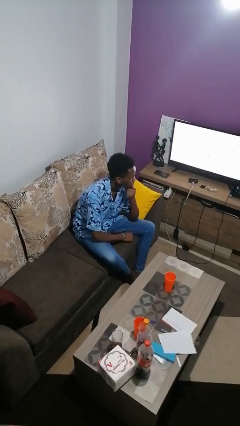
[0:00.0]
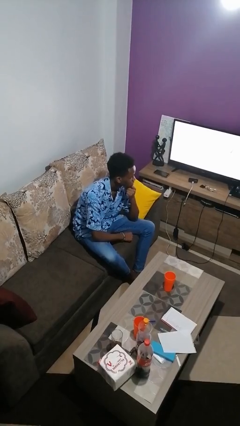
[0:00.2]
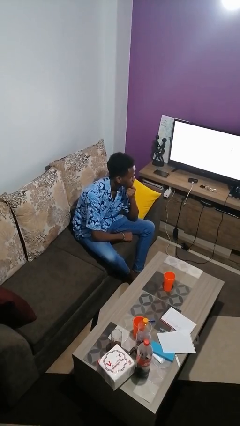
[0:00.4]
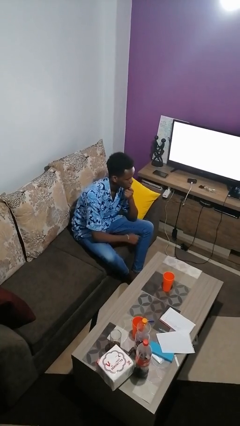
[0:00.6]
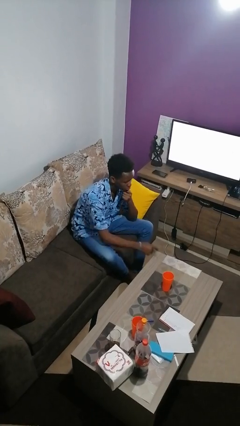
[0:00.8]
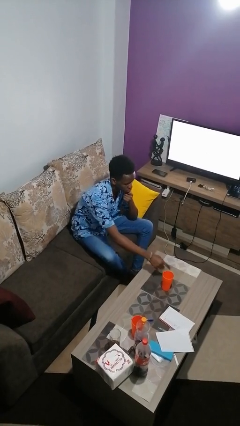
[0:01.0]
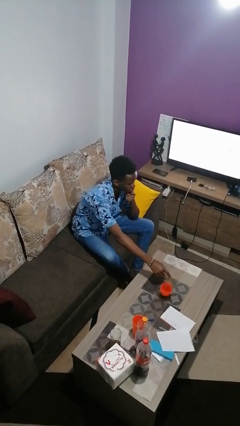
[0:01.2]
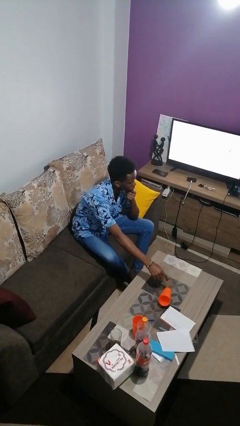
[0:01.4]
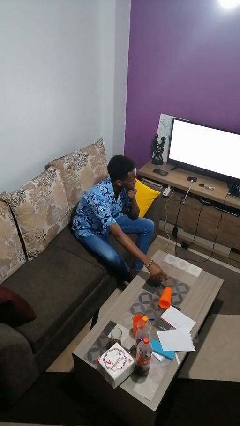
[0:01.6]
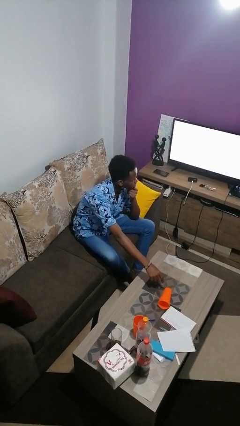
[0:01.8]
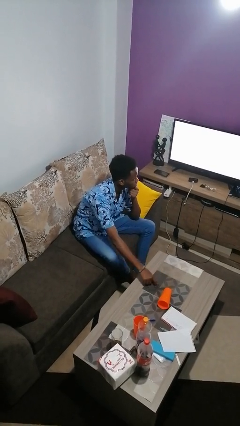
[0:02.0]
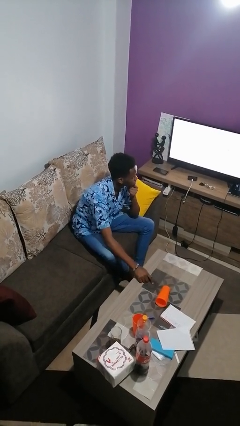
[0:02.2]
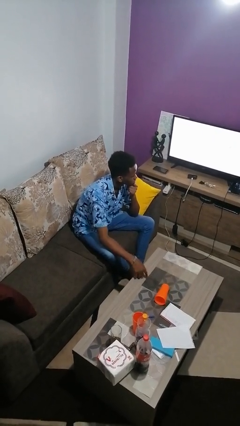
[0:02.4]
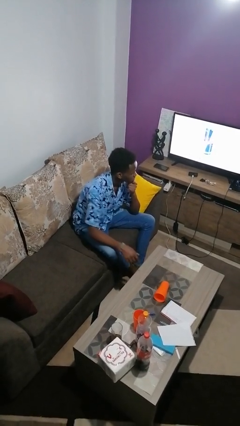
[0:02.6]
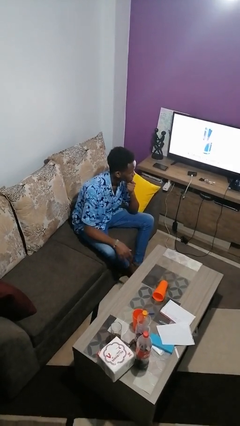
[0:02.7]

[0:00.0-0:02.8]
person knocks over glass

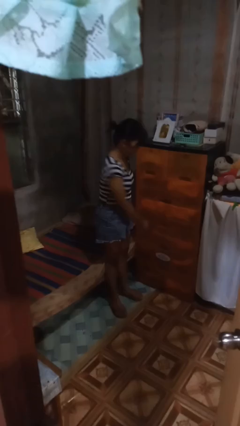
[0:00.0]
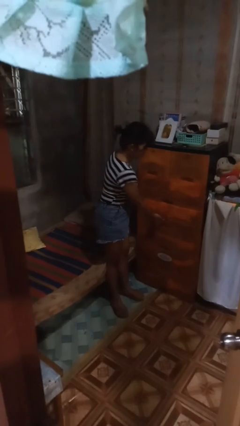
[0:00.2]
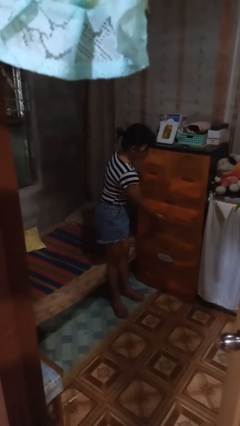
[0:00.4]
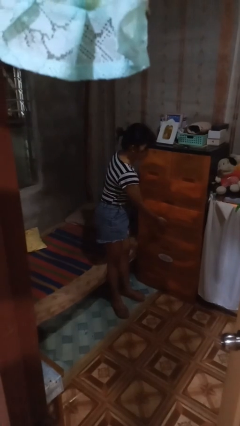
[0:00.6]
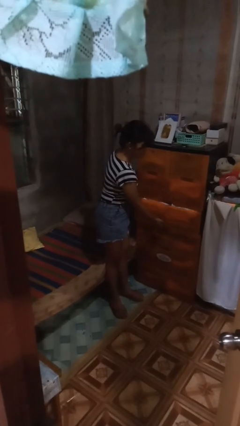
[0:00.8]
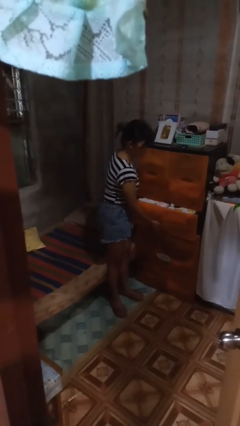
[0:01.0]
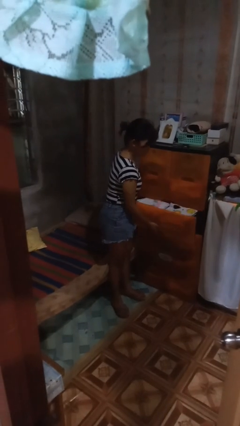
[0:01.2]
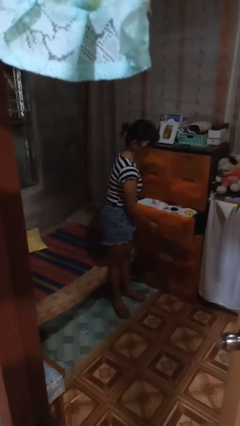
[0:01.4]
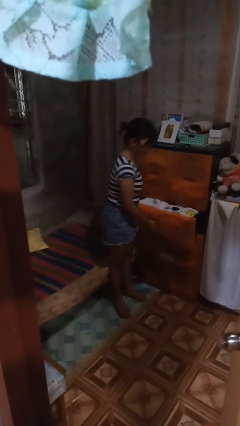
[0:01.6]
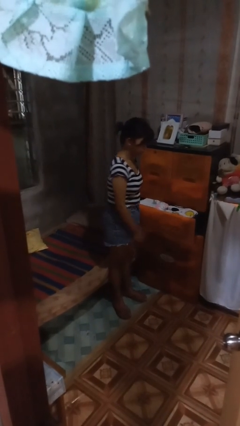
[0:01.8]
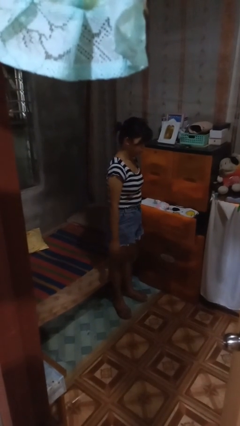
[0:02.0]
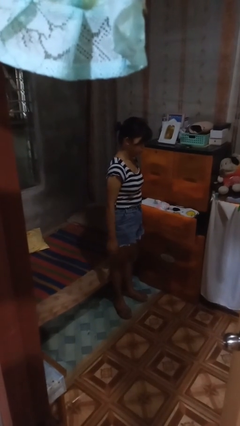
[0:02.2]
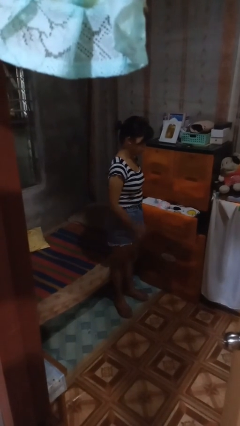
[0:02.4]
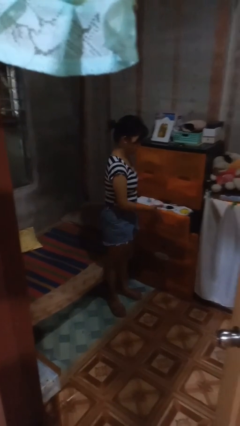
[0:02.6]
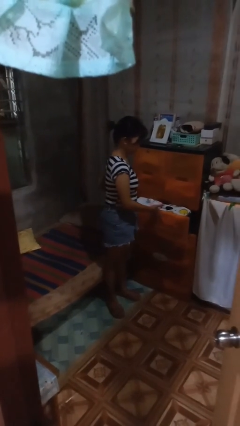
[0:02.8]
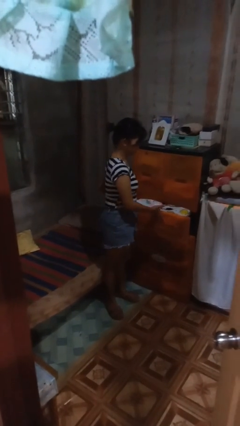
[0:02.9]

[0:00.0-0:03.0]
person opens dresser drawer

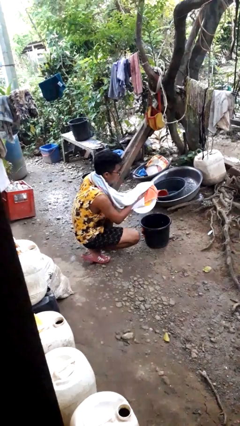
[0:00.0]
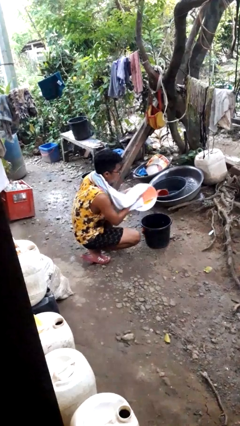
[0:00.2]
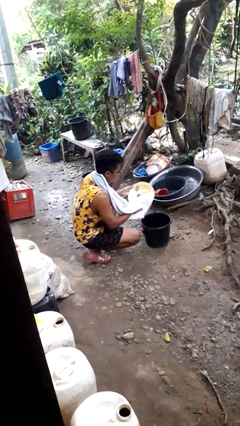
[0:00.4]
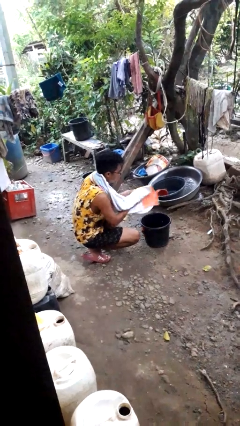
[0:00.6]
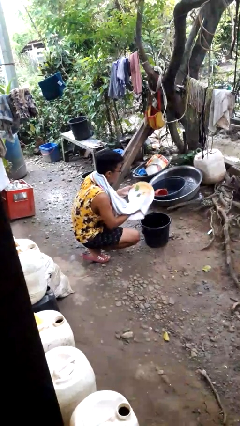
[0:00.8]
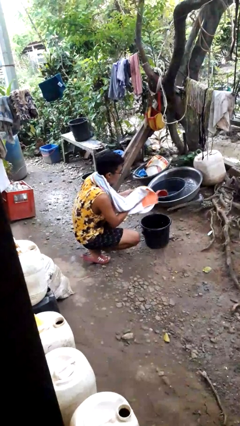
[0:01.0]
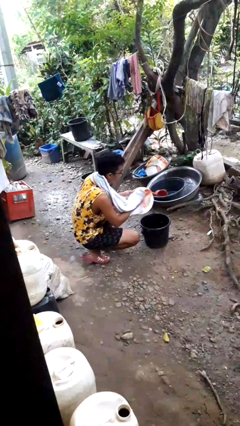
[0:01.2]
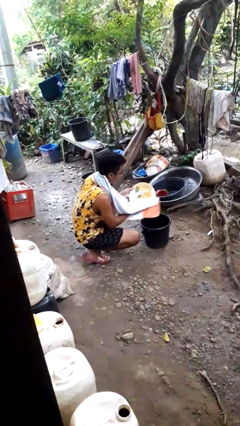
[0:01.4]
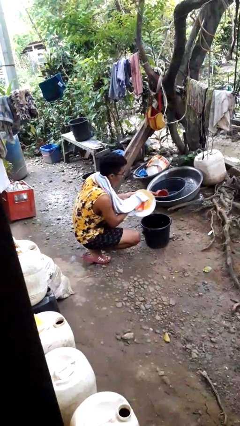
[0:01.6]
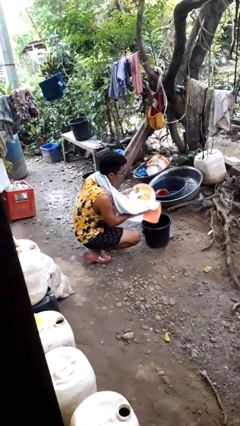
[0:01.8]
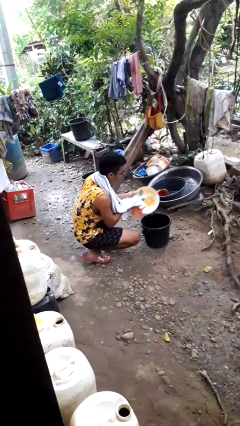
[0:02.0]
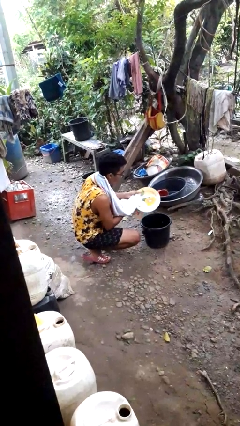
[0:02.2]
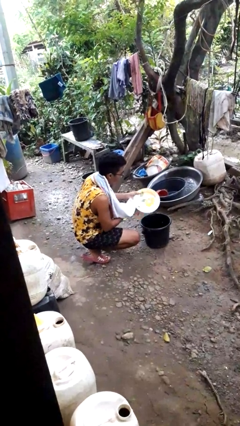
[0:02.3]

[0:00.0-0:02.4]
person dries dish

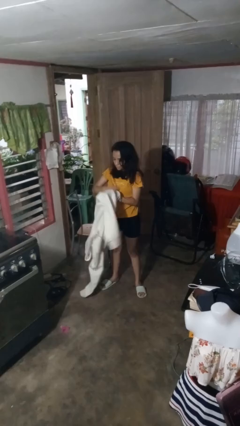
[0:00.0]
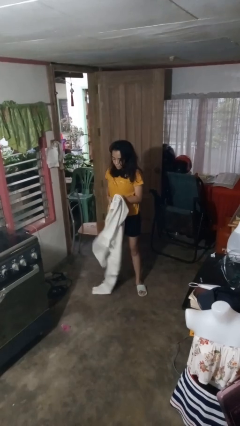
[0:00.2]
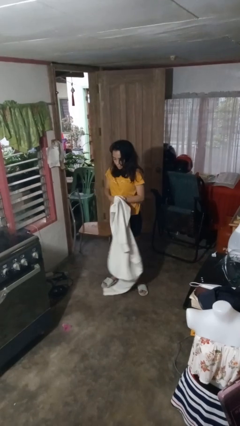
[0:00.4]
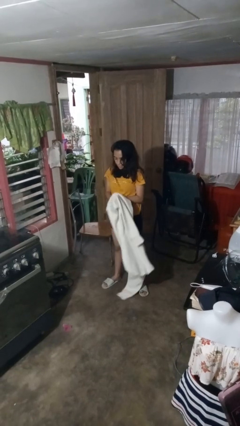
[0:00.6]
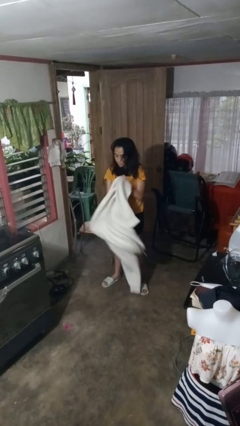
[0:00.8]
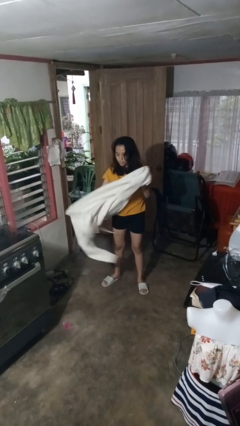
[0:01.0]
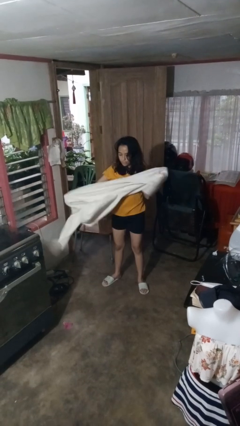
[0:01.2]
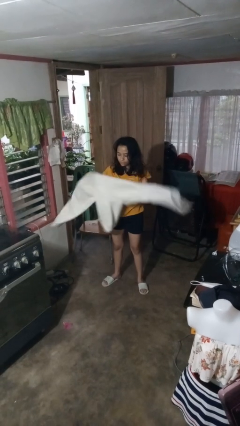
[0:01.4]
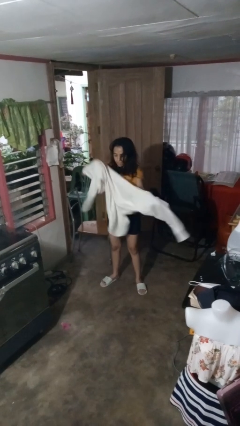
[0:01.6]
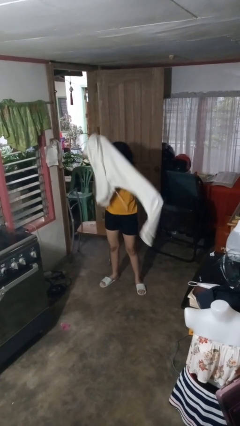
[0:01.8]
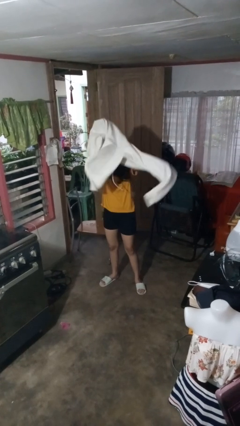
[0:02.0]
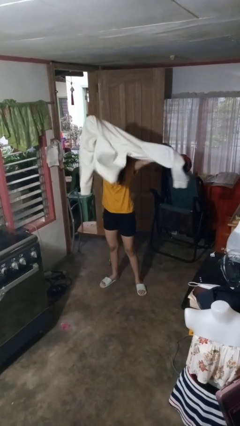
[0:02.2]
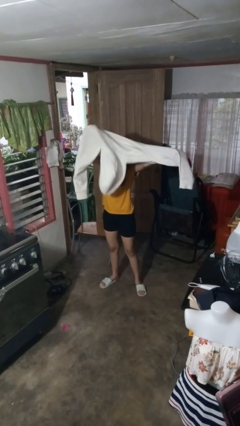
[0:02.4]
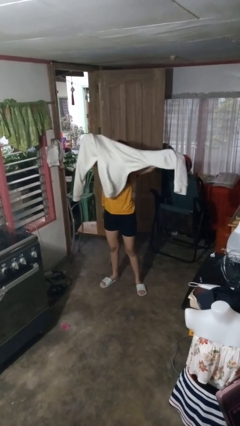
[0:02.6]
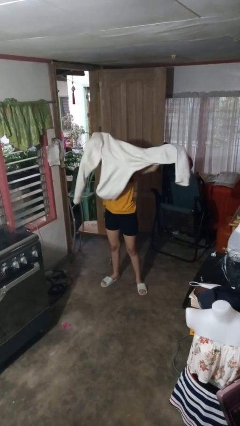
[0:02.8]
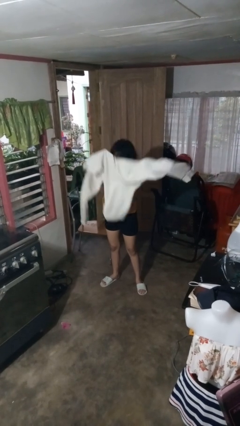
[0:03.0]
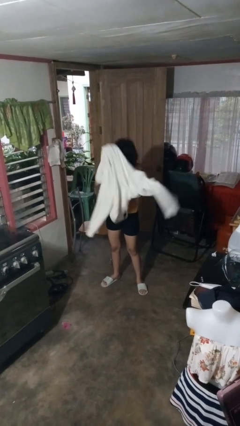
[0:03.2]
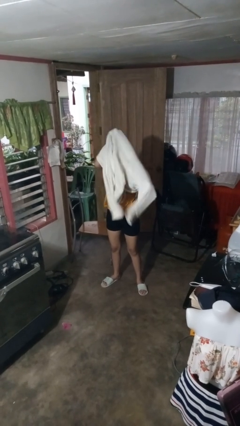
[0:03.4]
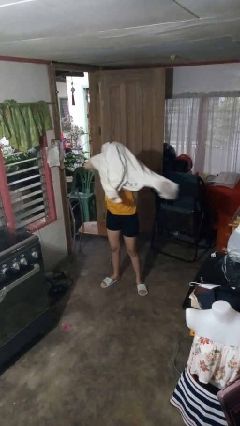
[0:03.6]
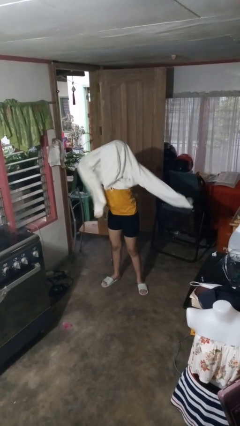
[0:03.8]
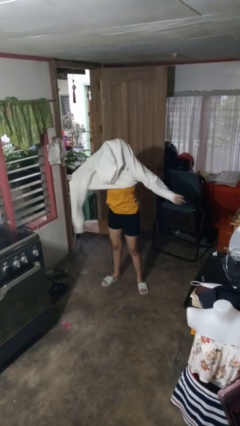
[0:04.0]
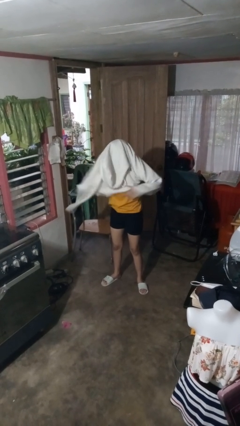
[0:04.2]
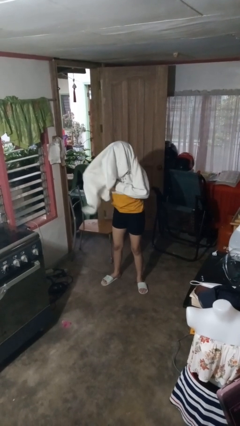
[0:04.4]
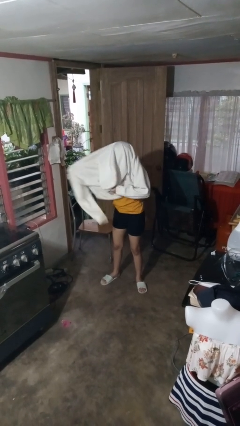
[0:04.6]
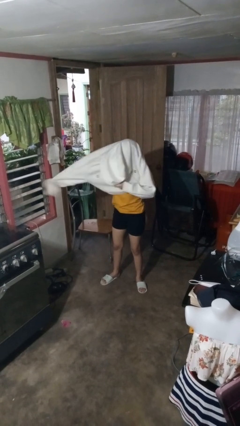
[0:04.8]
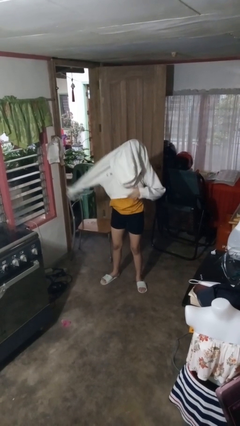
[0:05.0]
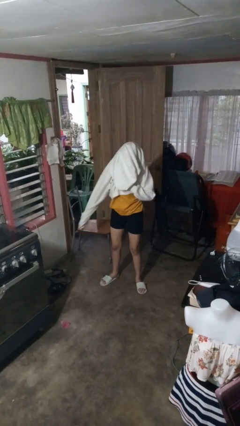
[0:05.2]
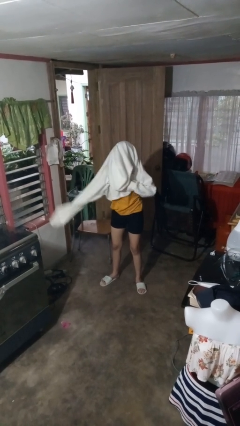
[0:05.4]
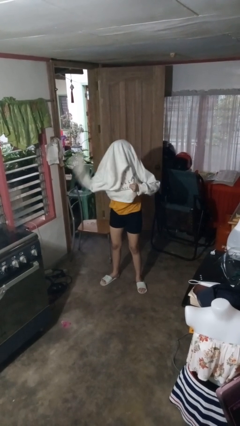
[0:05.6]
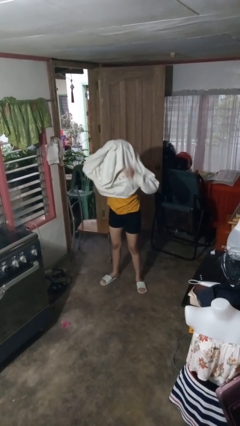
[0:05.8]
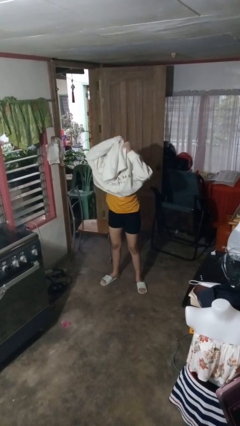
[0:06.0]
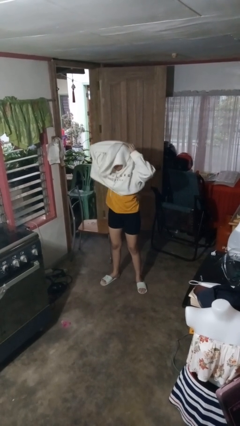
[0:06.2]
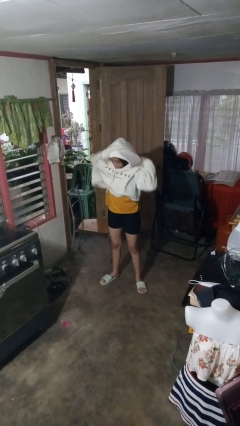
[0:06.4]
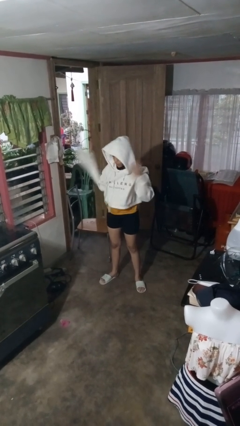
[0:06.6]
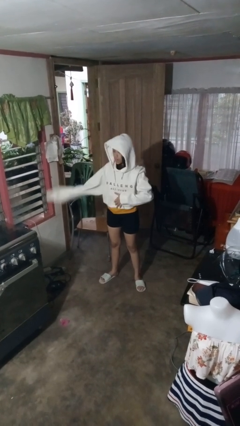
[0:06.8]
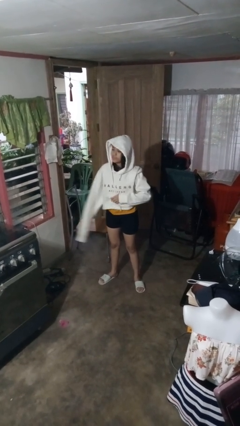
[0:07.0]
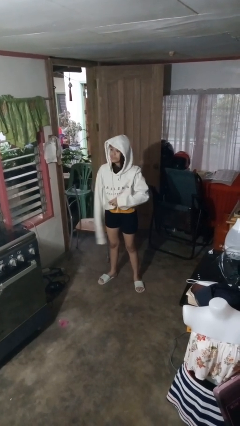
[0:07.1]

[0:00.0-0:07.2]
person puts on hoodie

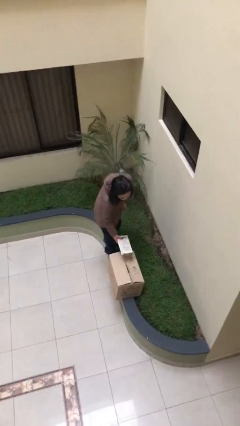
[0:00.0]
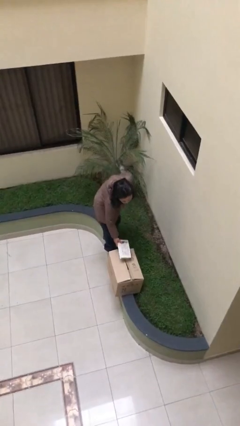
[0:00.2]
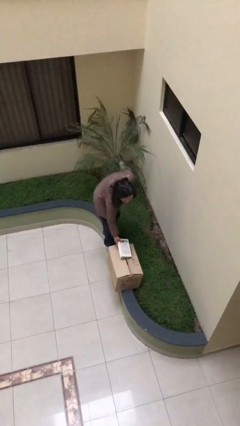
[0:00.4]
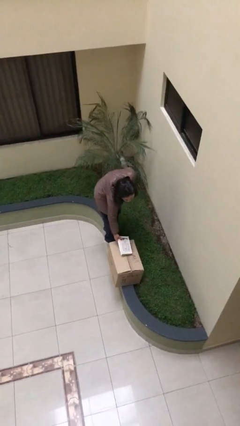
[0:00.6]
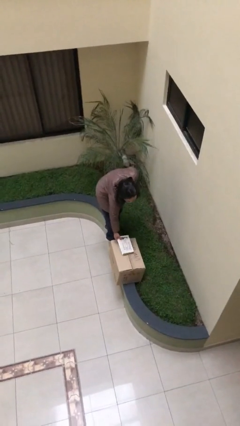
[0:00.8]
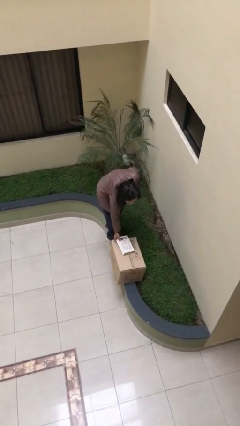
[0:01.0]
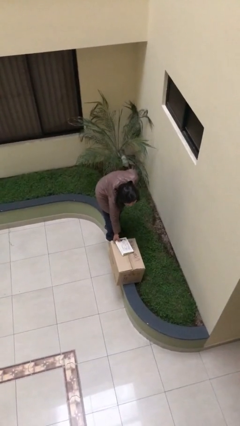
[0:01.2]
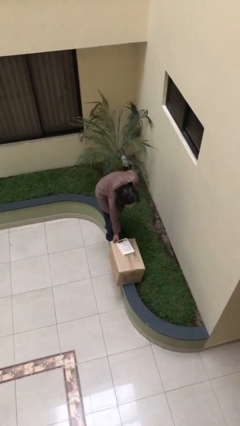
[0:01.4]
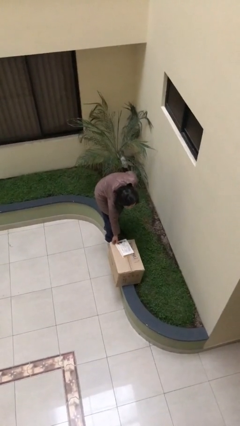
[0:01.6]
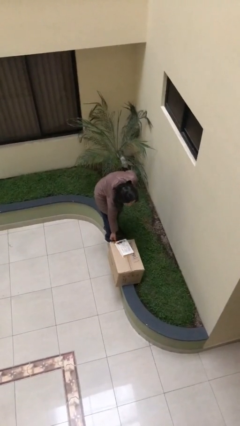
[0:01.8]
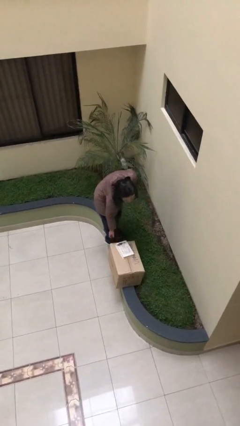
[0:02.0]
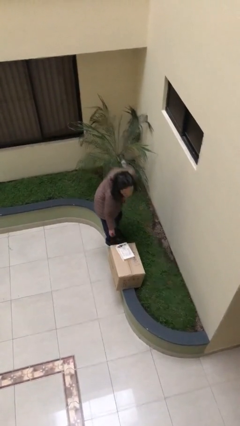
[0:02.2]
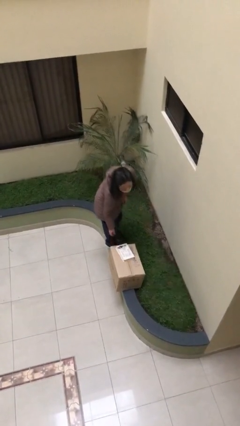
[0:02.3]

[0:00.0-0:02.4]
person puts down object on table
